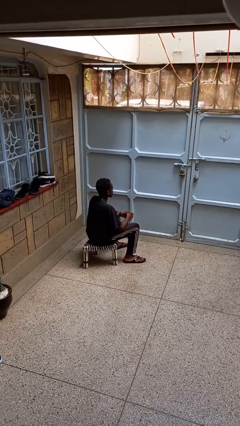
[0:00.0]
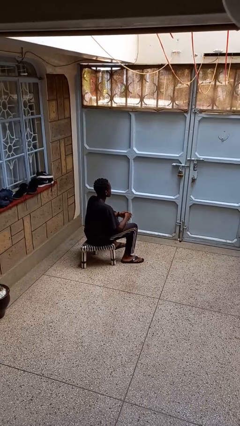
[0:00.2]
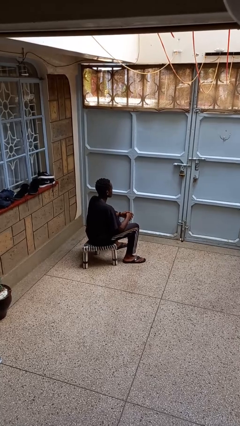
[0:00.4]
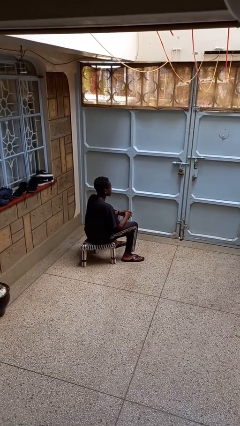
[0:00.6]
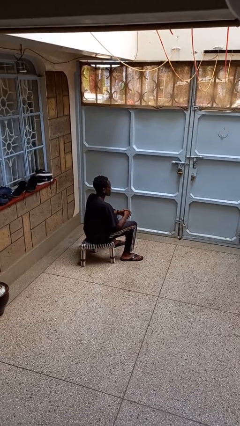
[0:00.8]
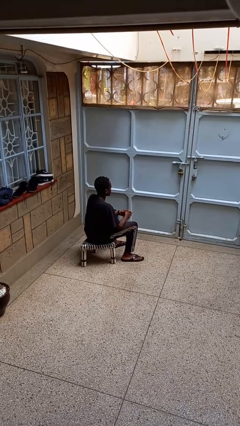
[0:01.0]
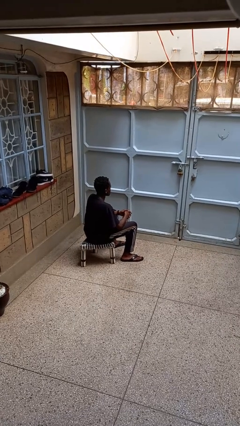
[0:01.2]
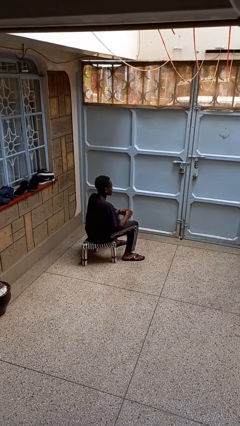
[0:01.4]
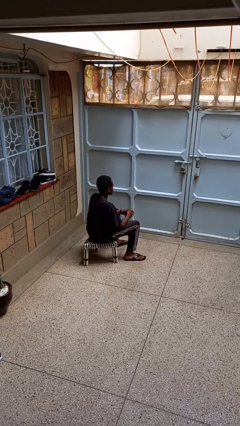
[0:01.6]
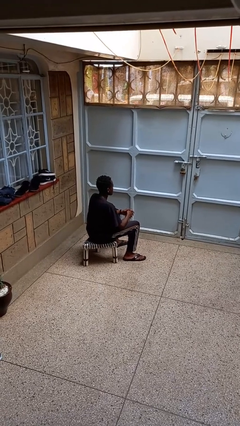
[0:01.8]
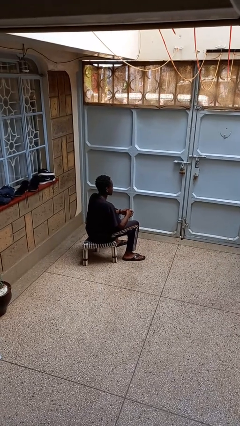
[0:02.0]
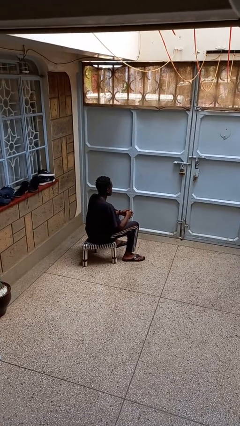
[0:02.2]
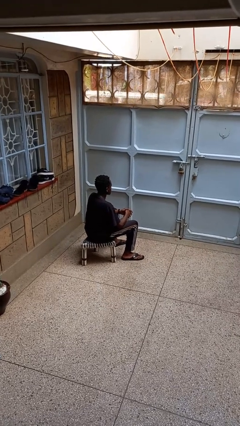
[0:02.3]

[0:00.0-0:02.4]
person shakes head

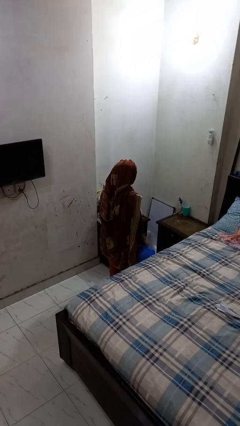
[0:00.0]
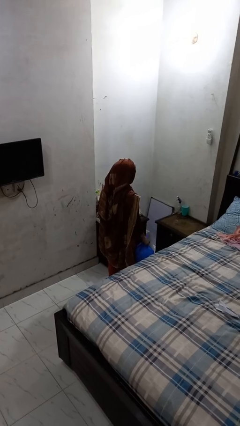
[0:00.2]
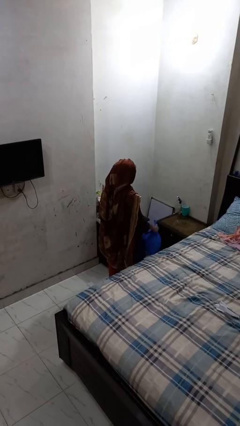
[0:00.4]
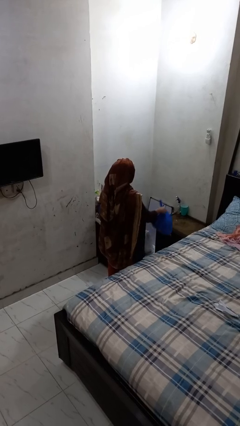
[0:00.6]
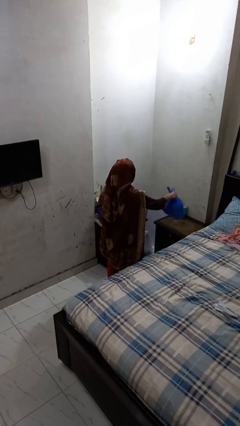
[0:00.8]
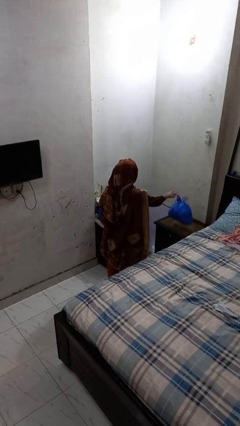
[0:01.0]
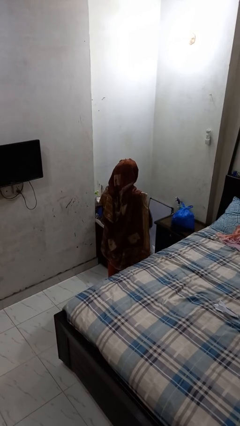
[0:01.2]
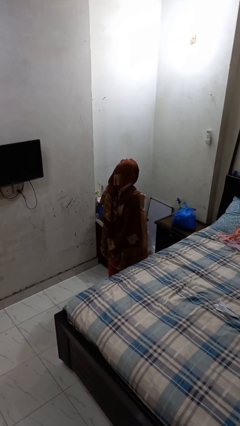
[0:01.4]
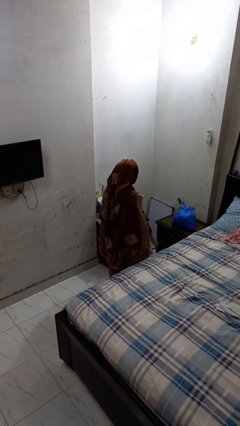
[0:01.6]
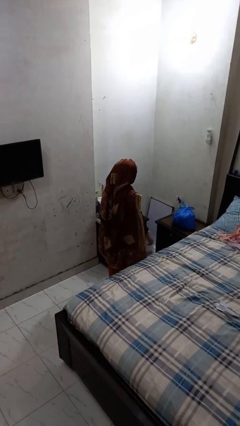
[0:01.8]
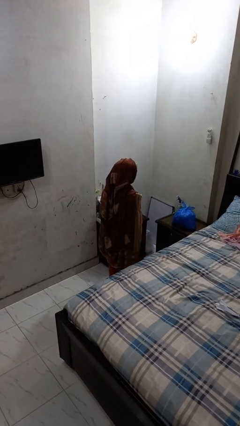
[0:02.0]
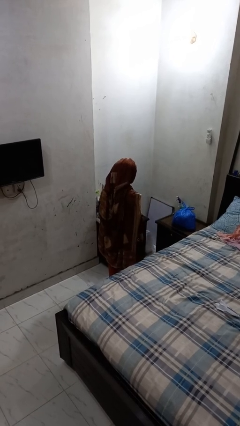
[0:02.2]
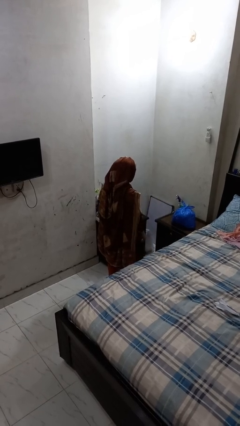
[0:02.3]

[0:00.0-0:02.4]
person throws object on table

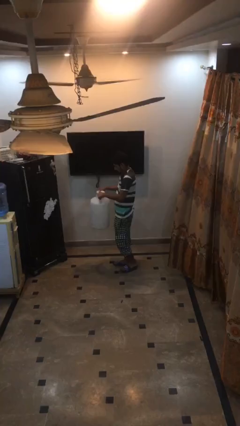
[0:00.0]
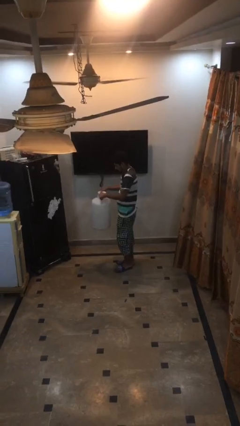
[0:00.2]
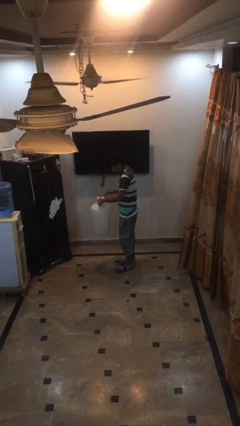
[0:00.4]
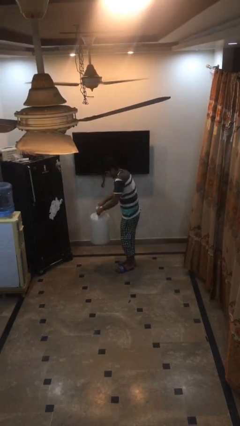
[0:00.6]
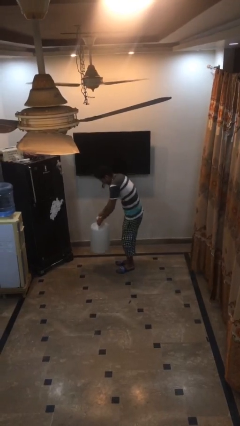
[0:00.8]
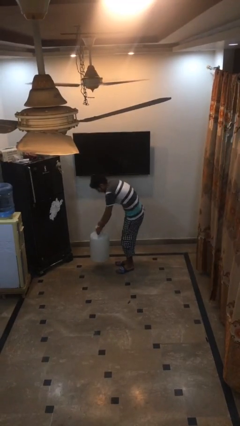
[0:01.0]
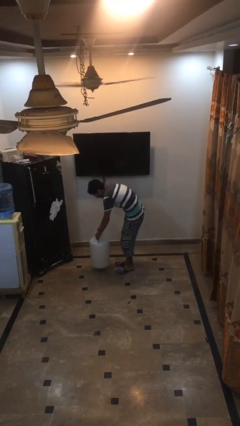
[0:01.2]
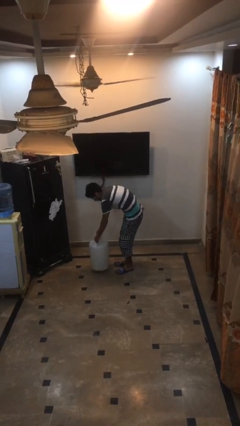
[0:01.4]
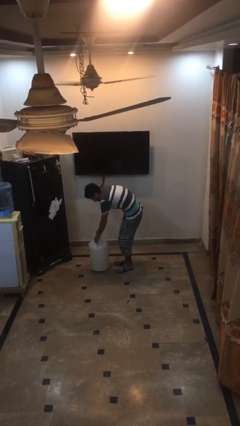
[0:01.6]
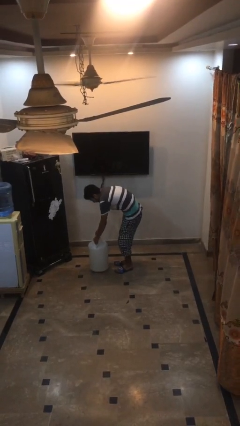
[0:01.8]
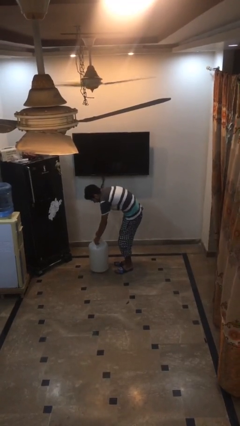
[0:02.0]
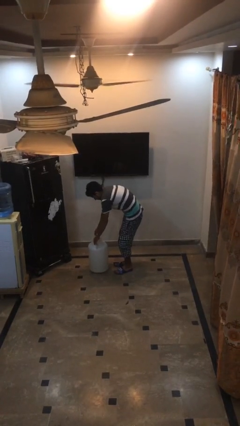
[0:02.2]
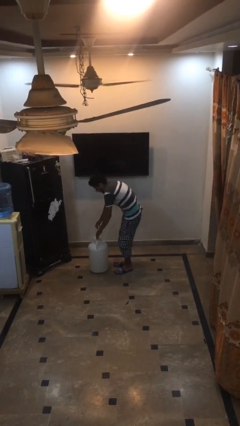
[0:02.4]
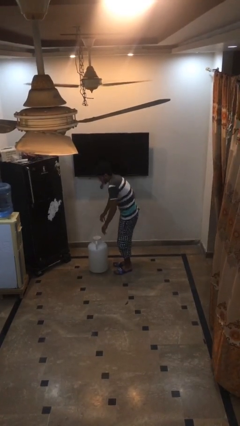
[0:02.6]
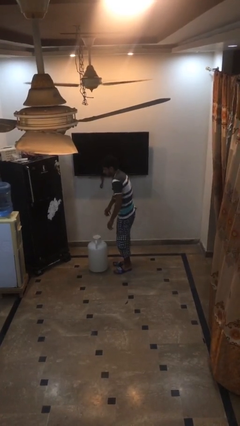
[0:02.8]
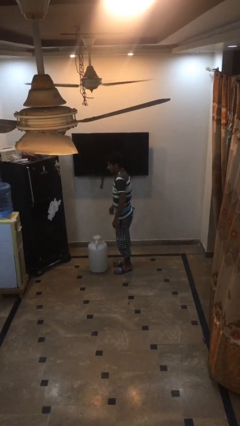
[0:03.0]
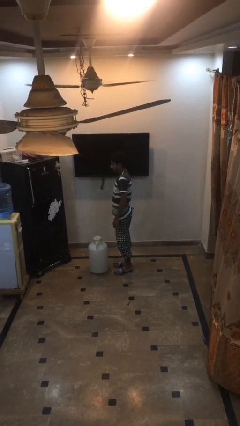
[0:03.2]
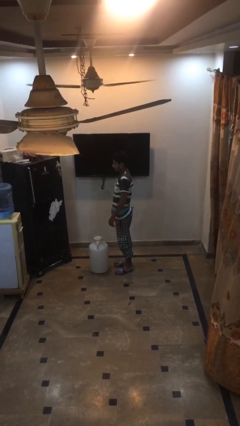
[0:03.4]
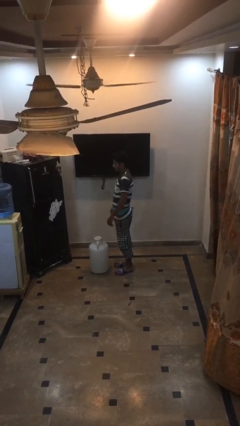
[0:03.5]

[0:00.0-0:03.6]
person puts down object on floor

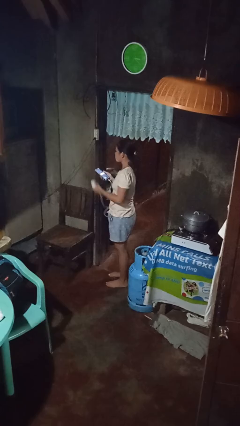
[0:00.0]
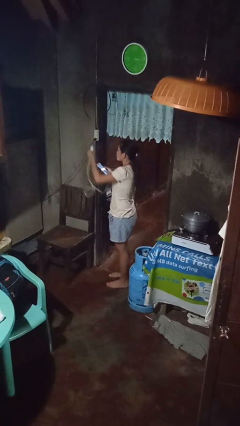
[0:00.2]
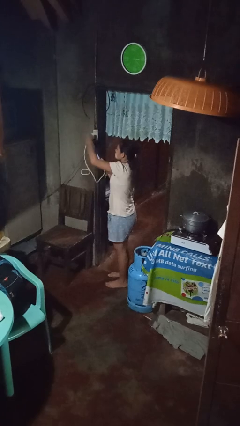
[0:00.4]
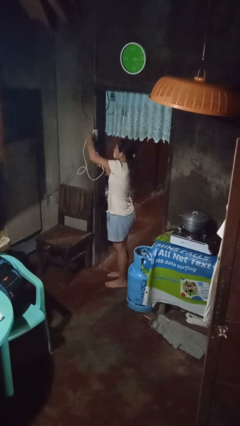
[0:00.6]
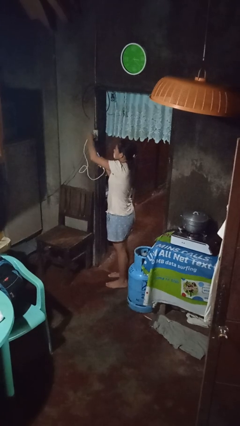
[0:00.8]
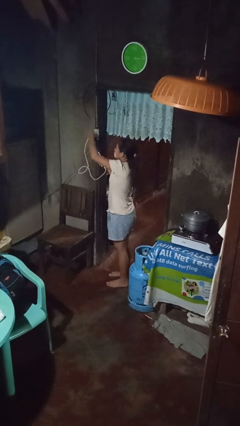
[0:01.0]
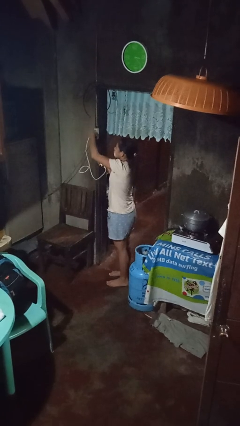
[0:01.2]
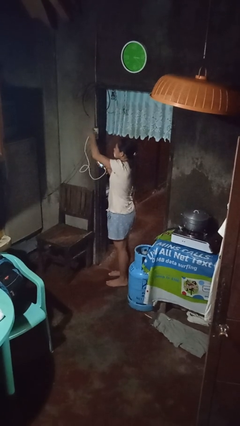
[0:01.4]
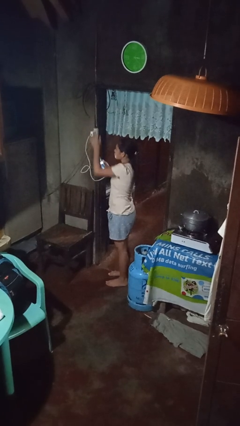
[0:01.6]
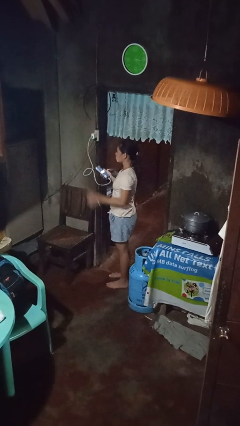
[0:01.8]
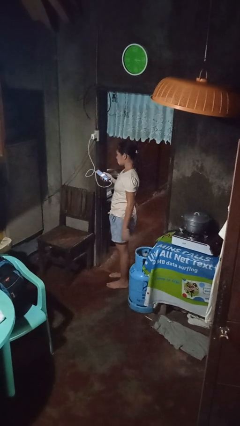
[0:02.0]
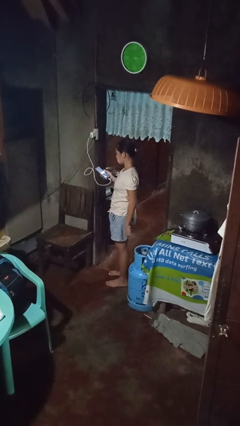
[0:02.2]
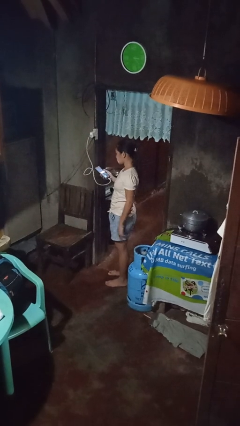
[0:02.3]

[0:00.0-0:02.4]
person plugs into electrical socket

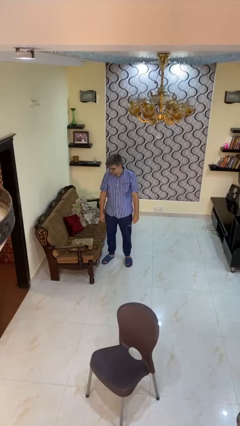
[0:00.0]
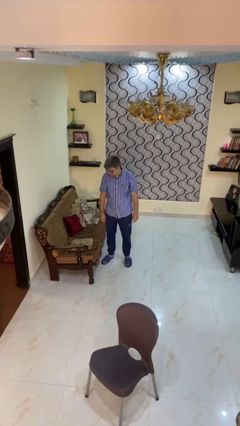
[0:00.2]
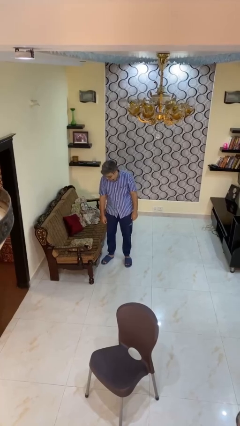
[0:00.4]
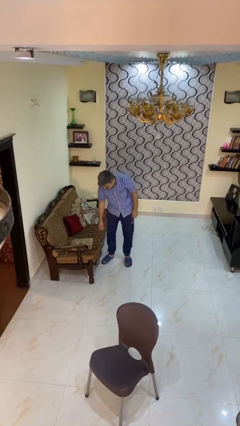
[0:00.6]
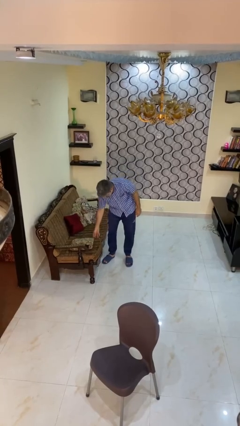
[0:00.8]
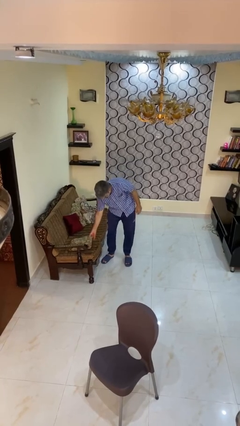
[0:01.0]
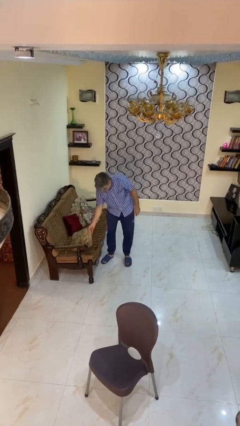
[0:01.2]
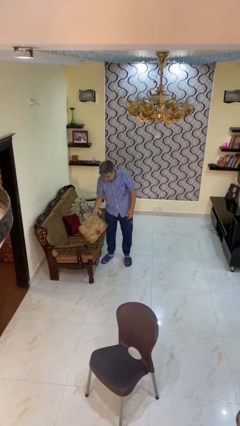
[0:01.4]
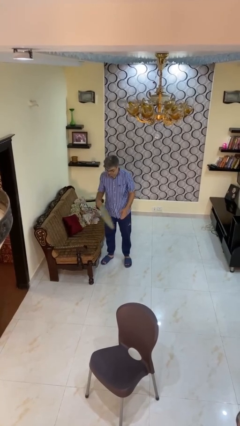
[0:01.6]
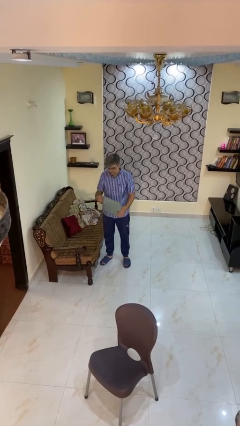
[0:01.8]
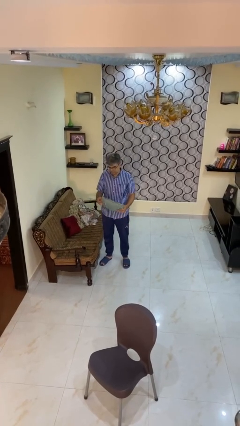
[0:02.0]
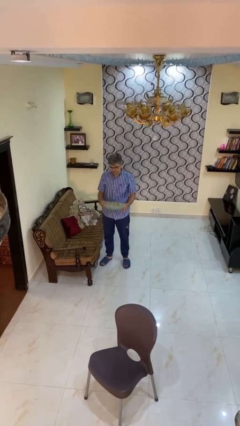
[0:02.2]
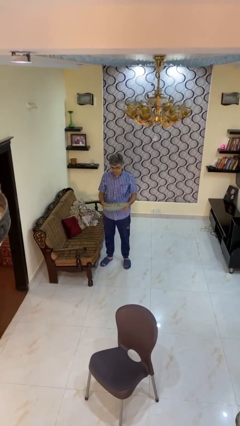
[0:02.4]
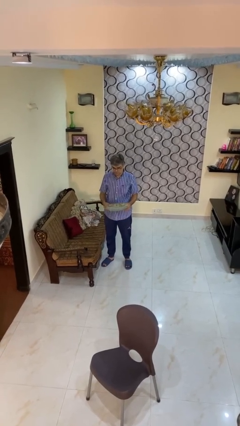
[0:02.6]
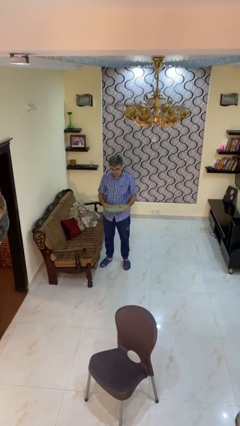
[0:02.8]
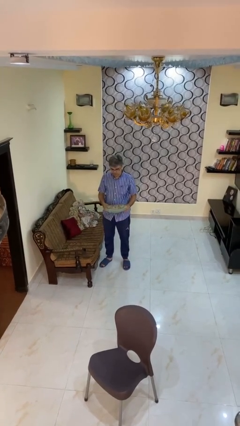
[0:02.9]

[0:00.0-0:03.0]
person picks up object from couch

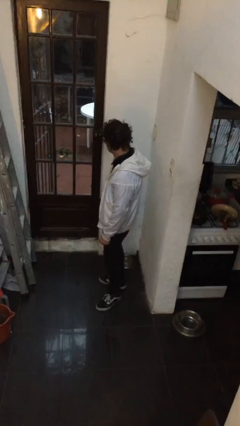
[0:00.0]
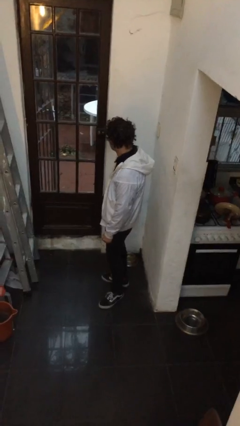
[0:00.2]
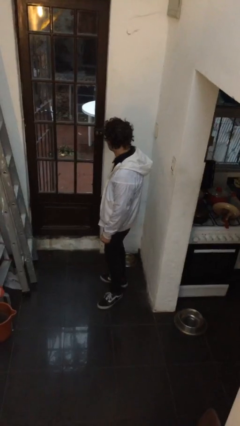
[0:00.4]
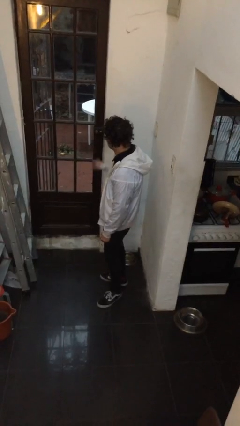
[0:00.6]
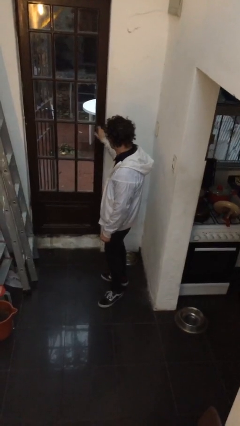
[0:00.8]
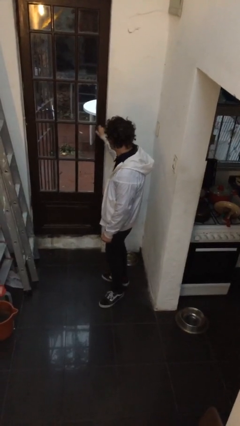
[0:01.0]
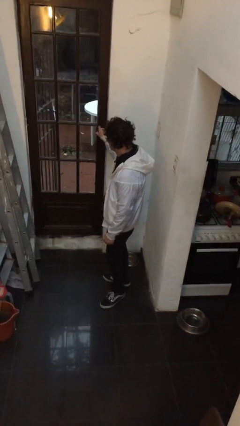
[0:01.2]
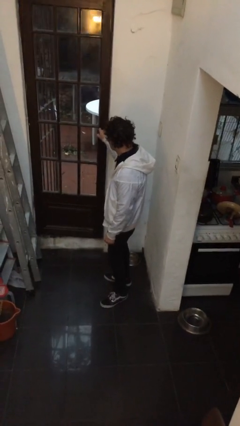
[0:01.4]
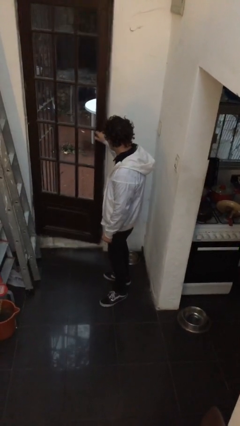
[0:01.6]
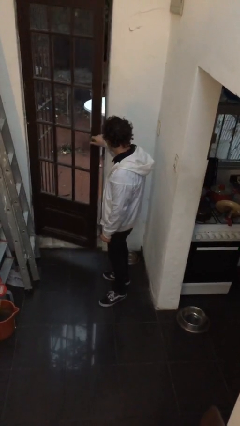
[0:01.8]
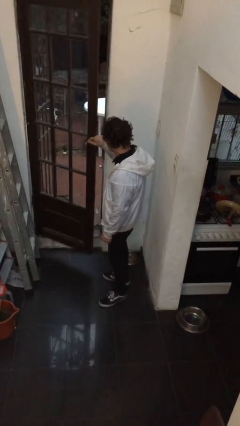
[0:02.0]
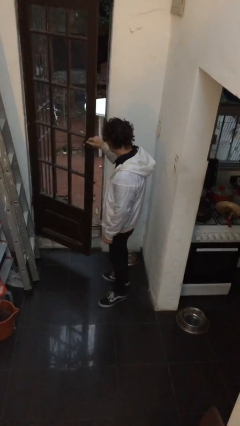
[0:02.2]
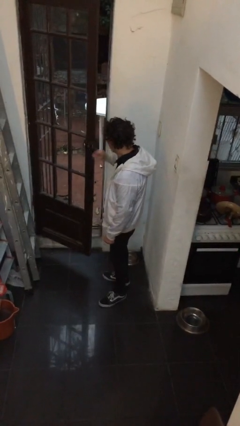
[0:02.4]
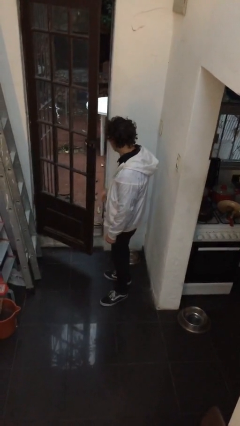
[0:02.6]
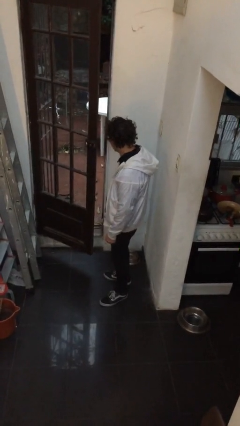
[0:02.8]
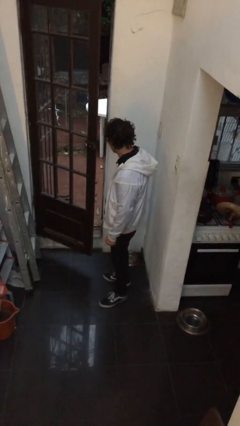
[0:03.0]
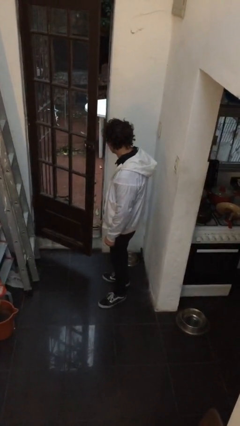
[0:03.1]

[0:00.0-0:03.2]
person opens facility door

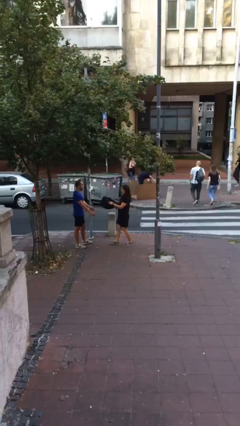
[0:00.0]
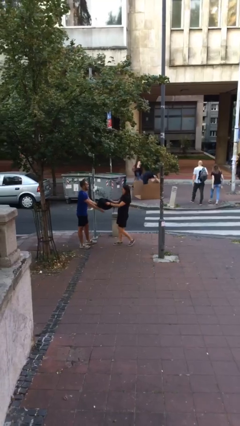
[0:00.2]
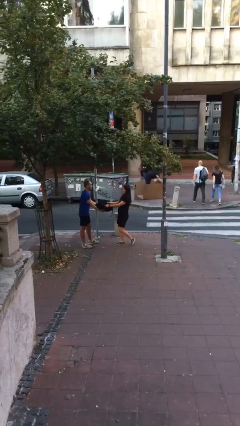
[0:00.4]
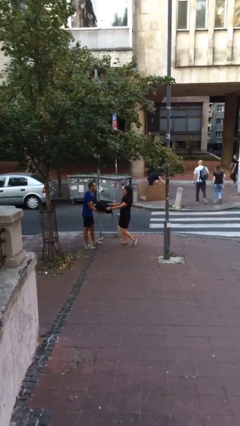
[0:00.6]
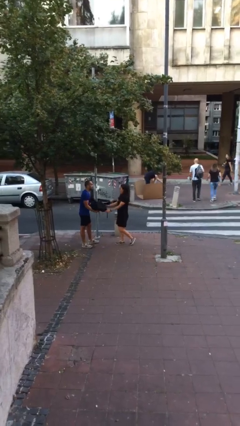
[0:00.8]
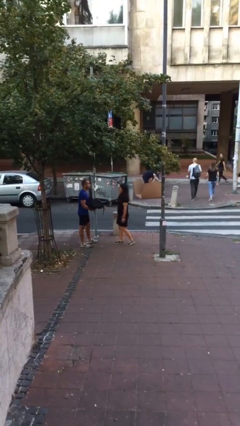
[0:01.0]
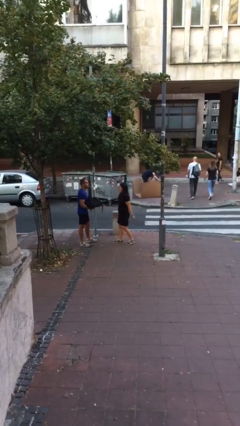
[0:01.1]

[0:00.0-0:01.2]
person transfers object to person
